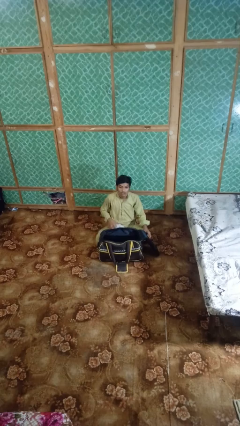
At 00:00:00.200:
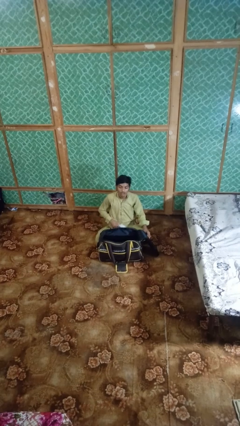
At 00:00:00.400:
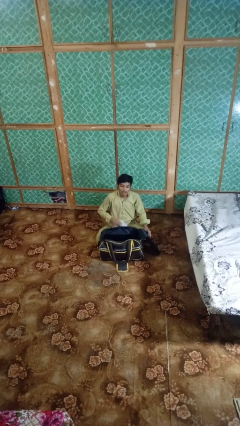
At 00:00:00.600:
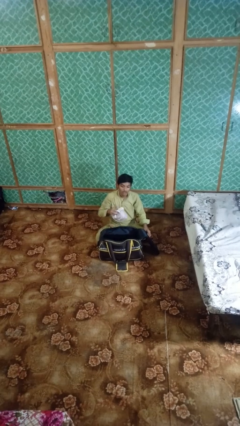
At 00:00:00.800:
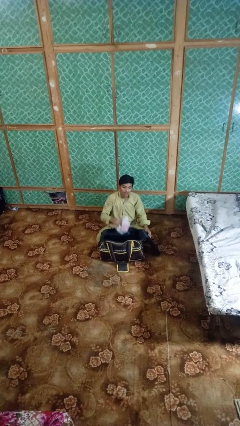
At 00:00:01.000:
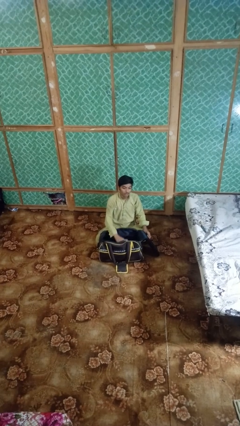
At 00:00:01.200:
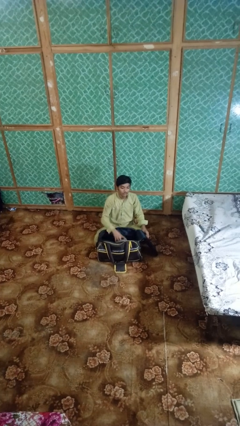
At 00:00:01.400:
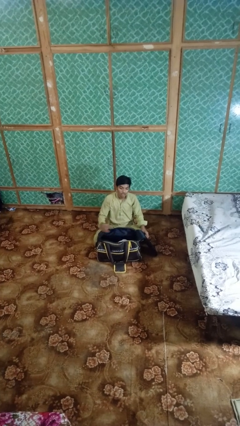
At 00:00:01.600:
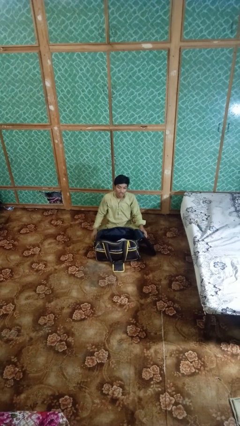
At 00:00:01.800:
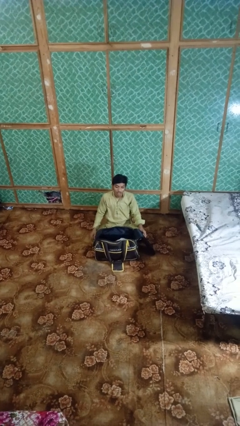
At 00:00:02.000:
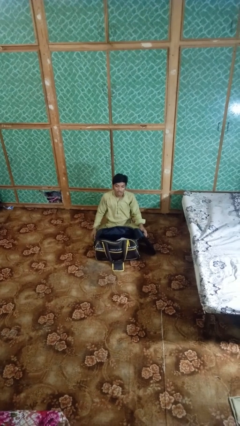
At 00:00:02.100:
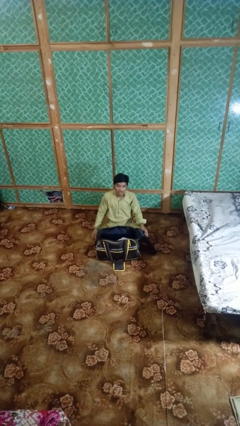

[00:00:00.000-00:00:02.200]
person puts object into bag

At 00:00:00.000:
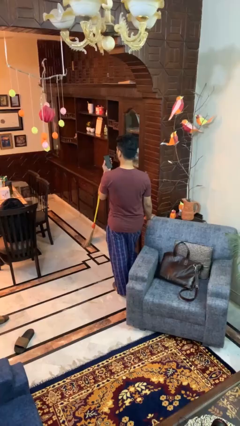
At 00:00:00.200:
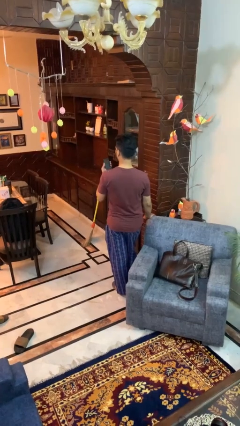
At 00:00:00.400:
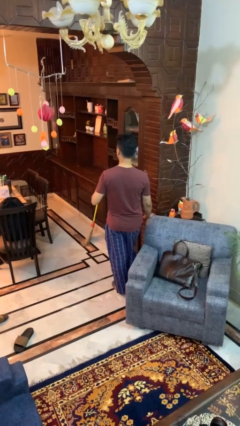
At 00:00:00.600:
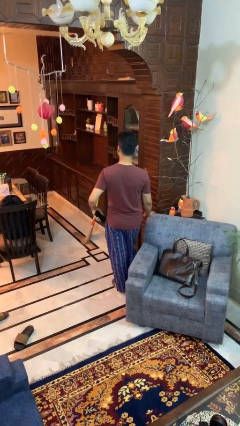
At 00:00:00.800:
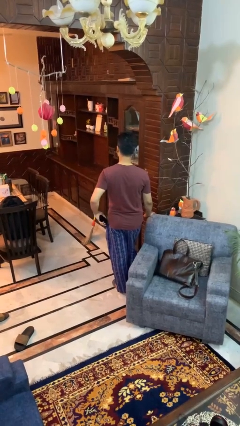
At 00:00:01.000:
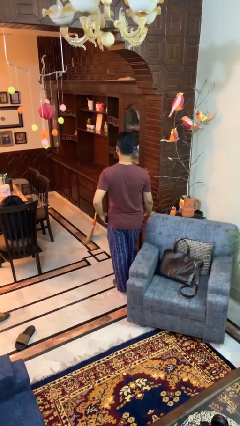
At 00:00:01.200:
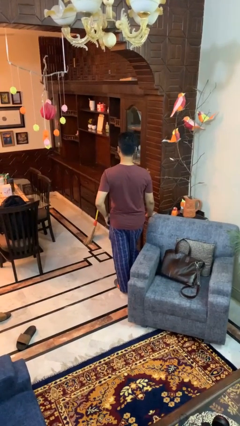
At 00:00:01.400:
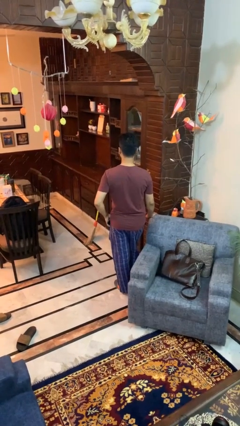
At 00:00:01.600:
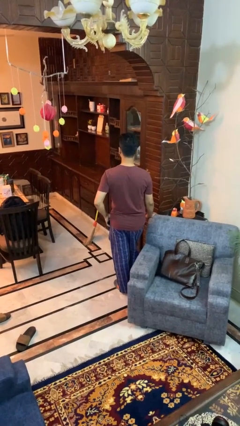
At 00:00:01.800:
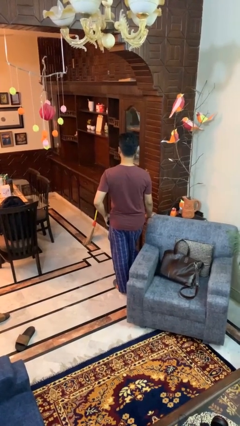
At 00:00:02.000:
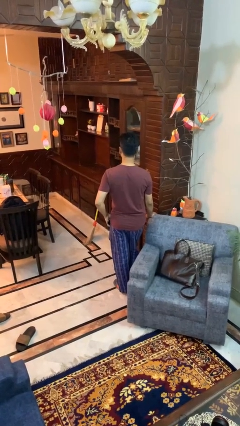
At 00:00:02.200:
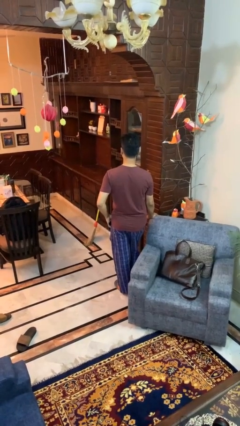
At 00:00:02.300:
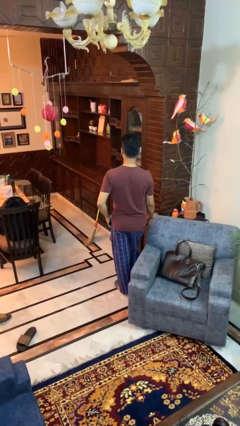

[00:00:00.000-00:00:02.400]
person puts phone into pocket

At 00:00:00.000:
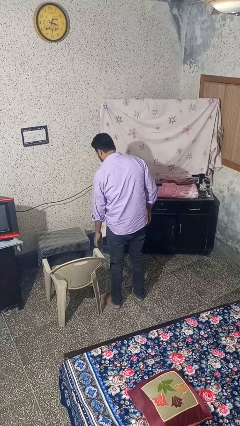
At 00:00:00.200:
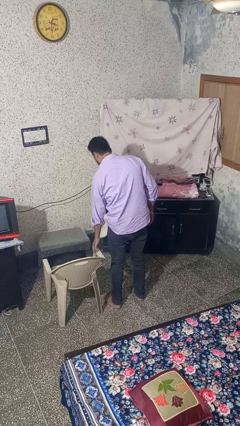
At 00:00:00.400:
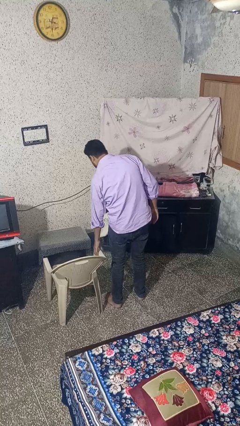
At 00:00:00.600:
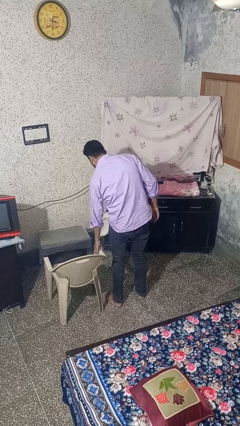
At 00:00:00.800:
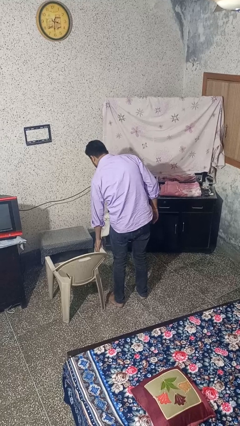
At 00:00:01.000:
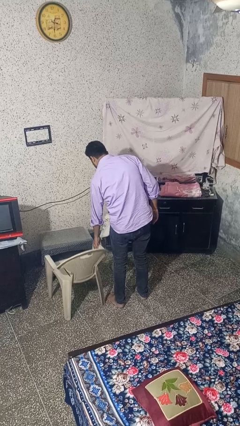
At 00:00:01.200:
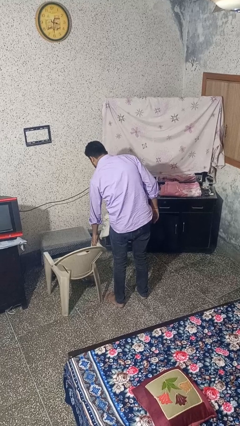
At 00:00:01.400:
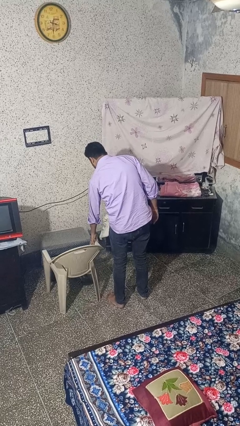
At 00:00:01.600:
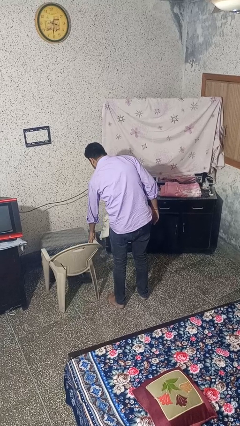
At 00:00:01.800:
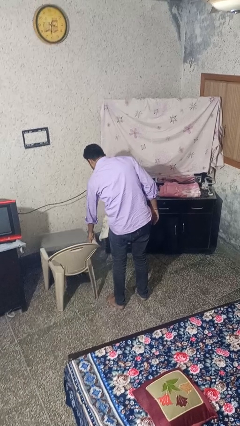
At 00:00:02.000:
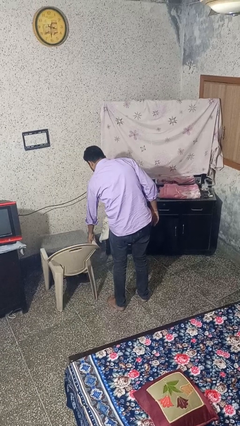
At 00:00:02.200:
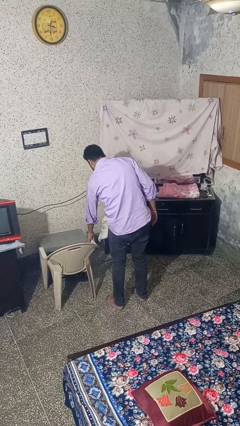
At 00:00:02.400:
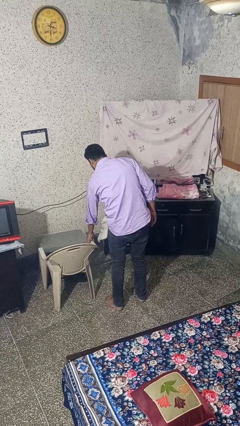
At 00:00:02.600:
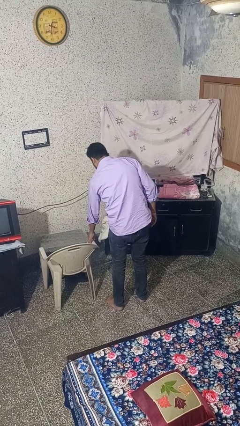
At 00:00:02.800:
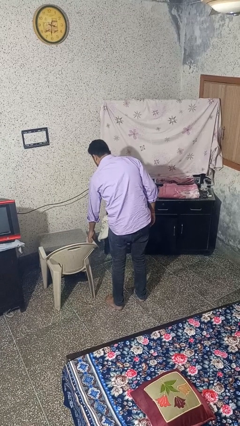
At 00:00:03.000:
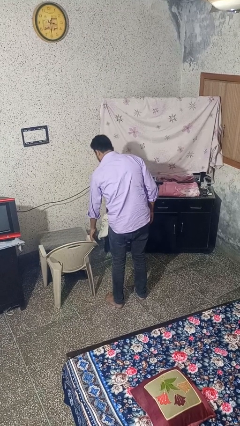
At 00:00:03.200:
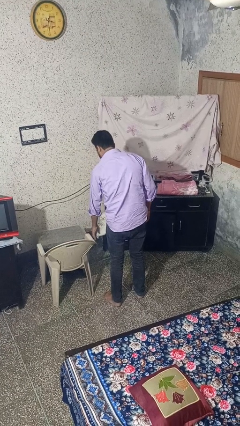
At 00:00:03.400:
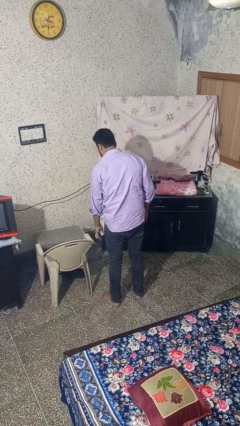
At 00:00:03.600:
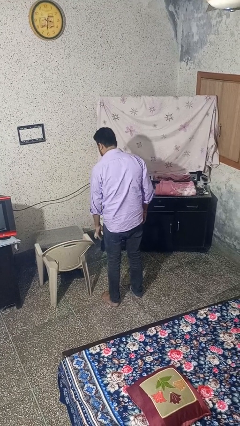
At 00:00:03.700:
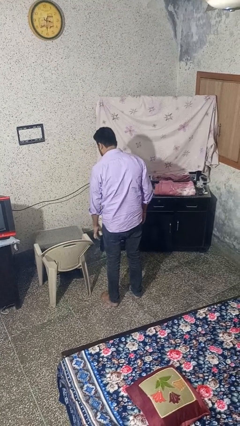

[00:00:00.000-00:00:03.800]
person pushes in chair

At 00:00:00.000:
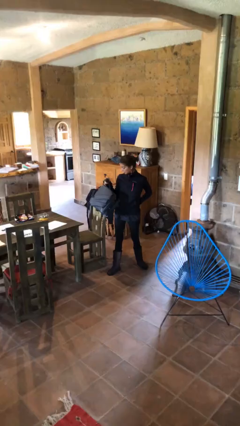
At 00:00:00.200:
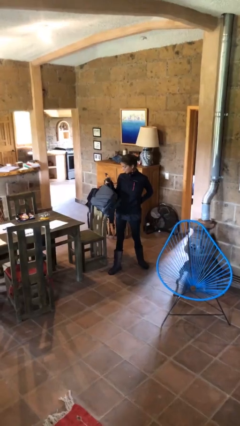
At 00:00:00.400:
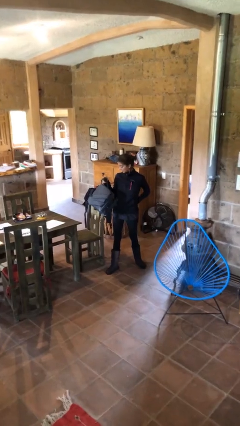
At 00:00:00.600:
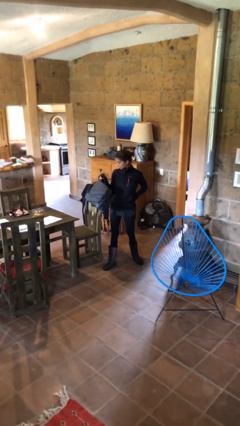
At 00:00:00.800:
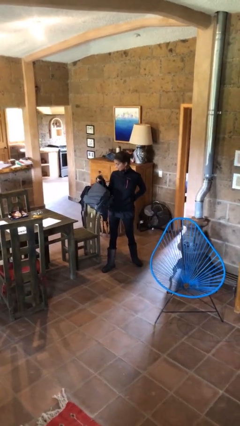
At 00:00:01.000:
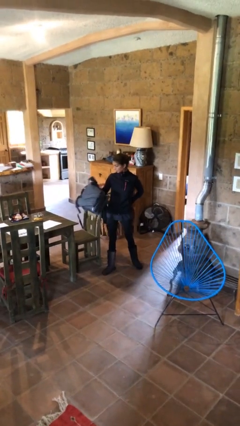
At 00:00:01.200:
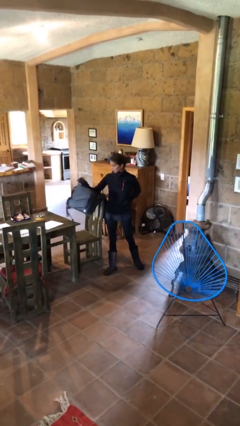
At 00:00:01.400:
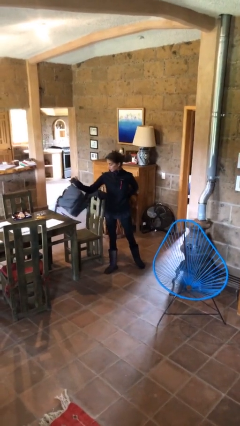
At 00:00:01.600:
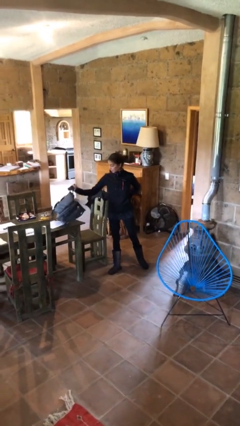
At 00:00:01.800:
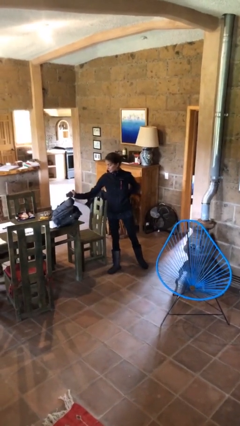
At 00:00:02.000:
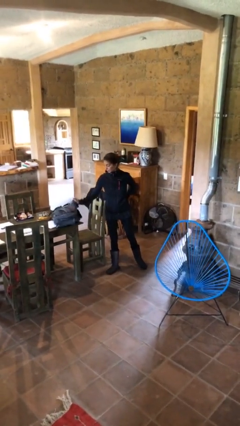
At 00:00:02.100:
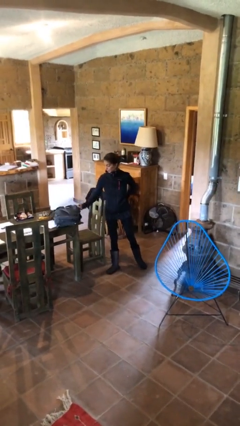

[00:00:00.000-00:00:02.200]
person puts down object on table

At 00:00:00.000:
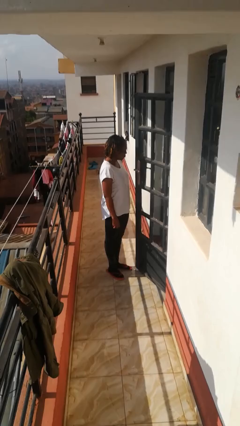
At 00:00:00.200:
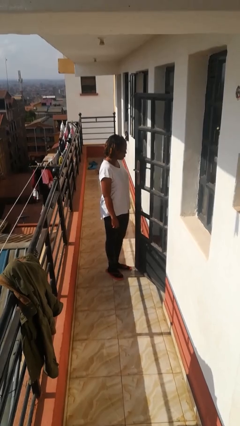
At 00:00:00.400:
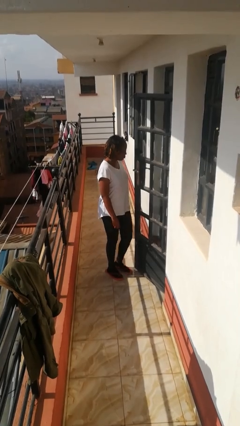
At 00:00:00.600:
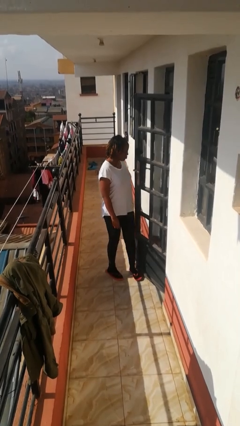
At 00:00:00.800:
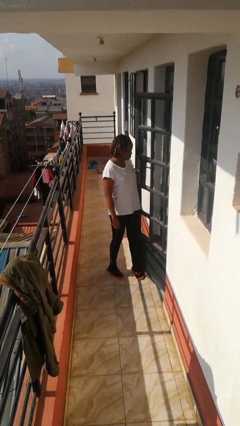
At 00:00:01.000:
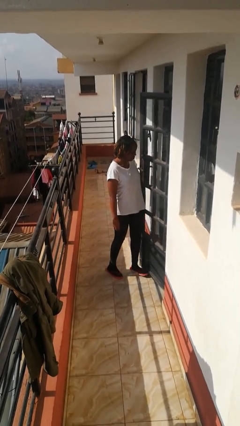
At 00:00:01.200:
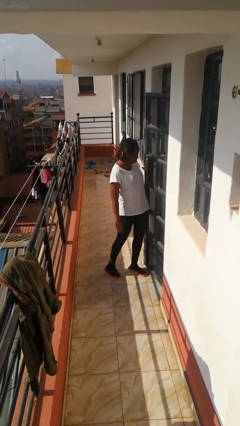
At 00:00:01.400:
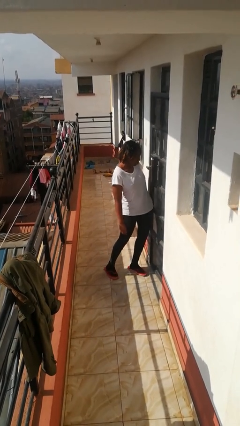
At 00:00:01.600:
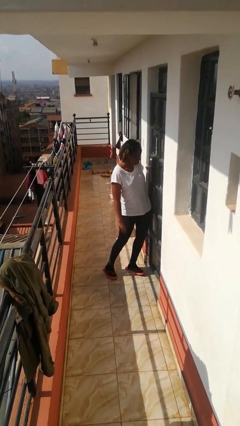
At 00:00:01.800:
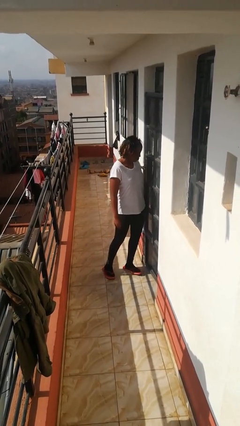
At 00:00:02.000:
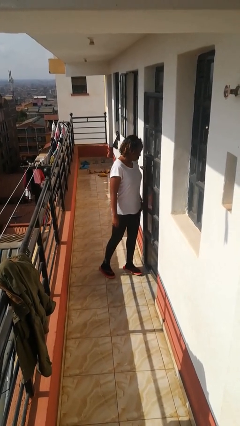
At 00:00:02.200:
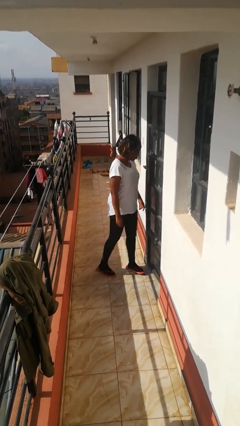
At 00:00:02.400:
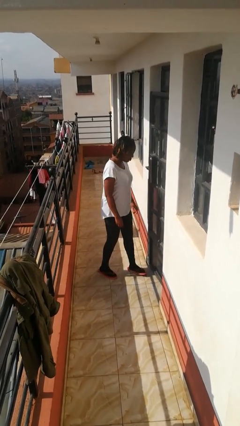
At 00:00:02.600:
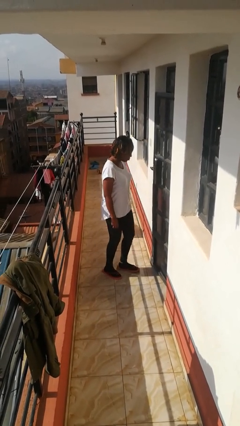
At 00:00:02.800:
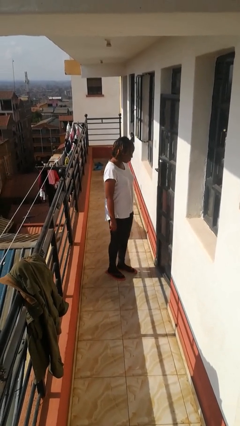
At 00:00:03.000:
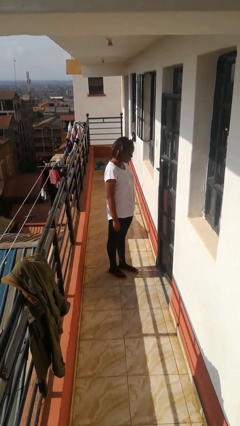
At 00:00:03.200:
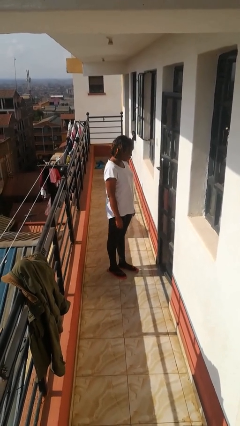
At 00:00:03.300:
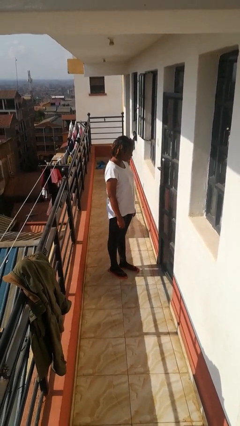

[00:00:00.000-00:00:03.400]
person closes door with hip

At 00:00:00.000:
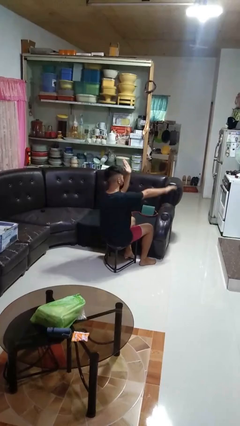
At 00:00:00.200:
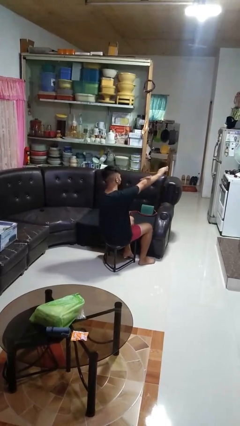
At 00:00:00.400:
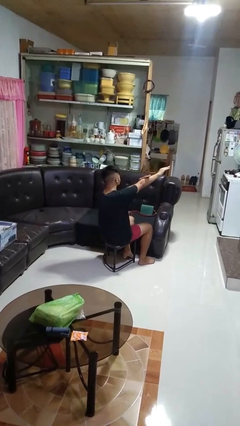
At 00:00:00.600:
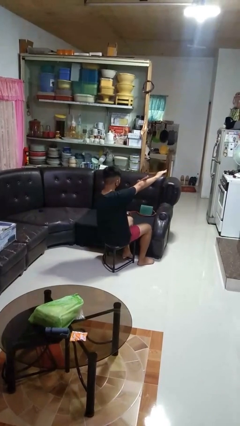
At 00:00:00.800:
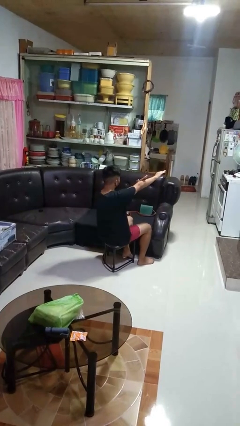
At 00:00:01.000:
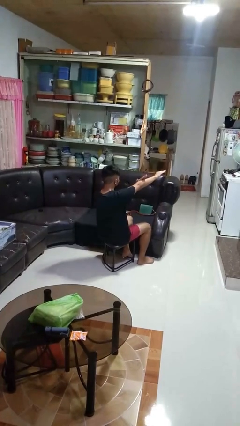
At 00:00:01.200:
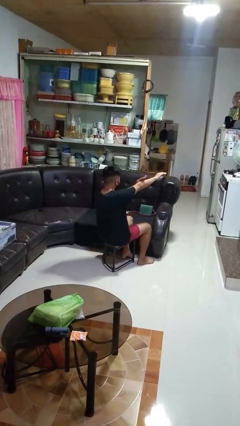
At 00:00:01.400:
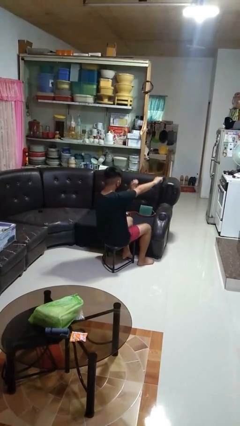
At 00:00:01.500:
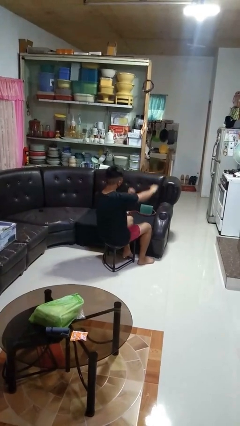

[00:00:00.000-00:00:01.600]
person swats bug

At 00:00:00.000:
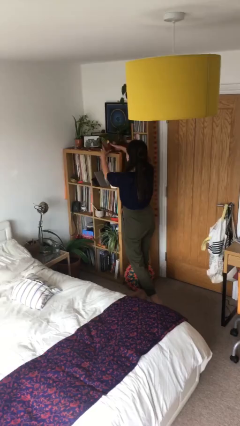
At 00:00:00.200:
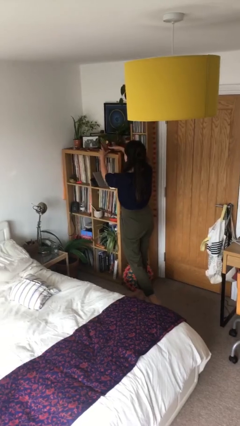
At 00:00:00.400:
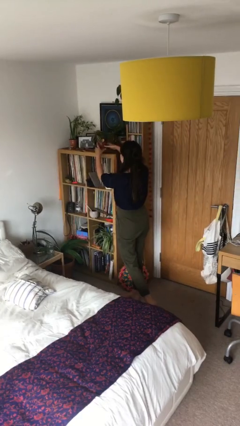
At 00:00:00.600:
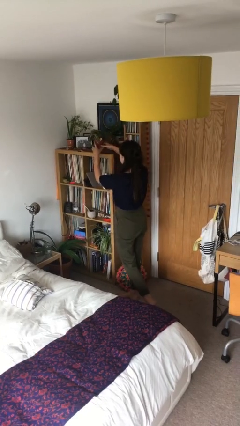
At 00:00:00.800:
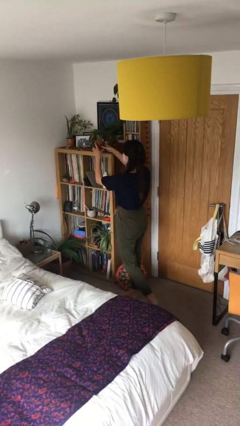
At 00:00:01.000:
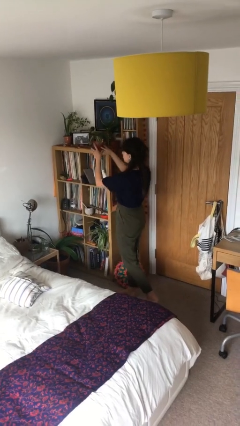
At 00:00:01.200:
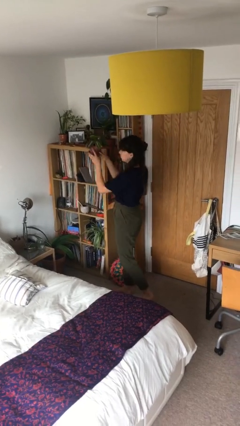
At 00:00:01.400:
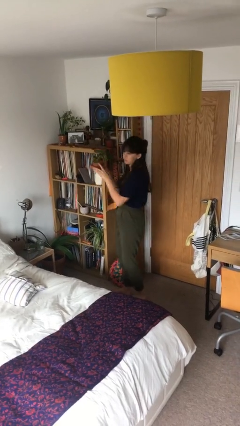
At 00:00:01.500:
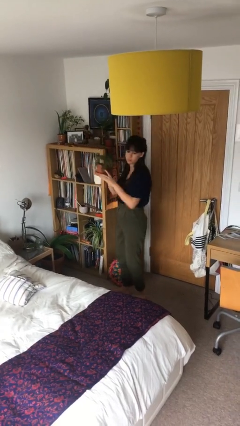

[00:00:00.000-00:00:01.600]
person picks up object from shelf
